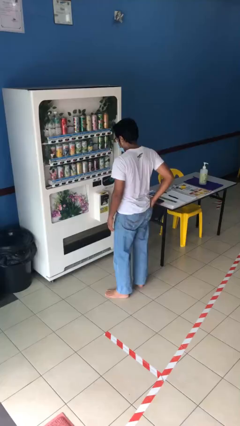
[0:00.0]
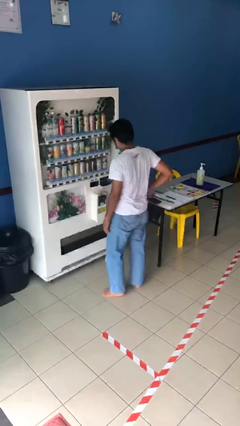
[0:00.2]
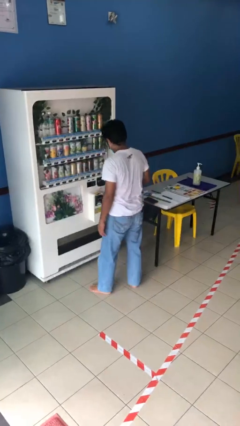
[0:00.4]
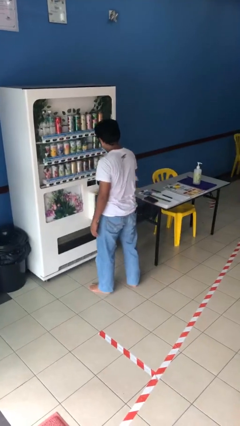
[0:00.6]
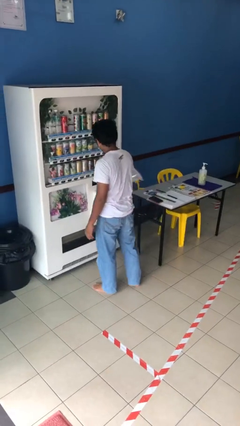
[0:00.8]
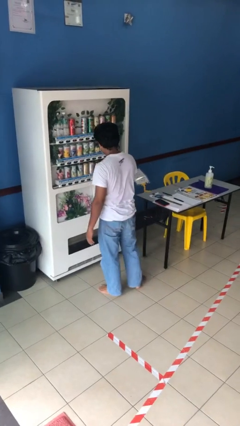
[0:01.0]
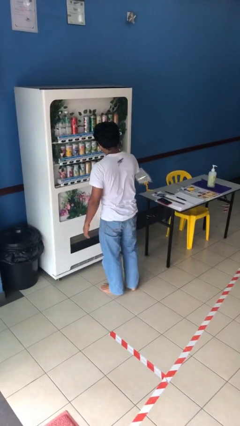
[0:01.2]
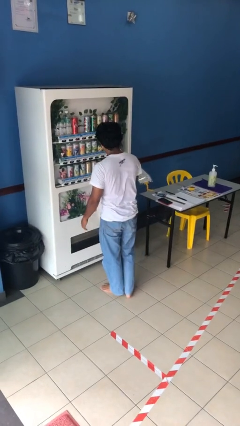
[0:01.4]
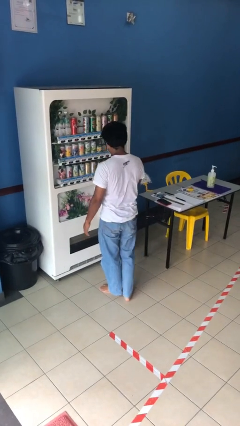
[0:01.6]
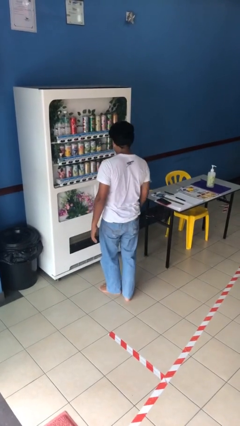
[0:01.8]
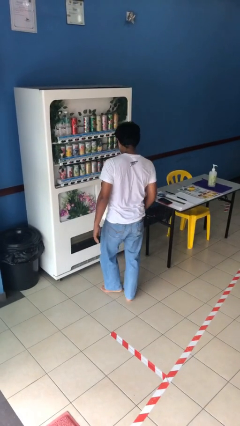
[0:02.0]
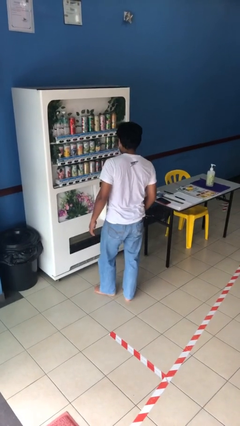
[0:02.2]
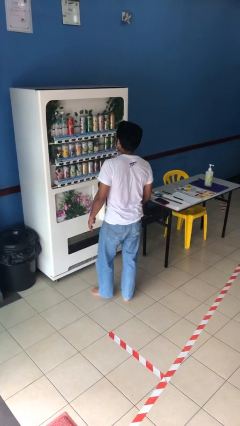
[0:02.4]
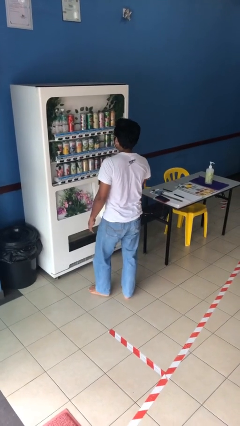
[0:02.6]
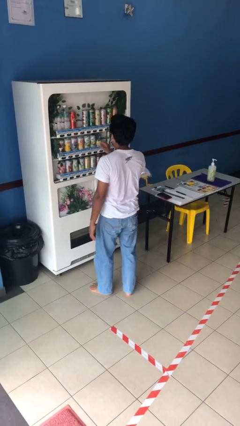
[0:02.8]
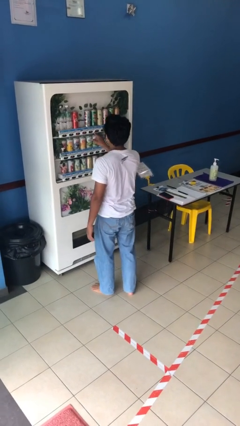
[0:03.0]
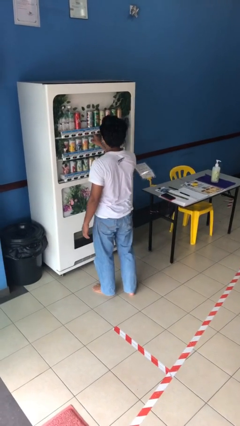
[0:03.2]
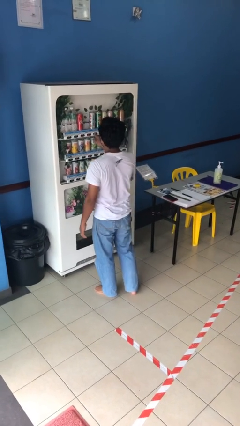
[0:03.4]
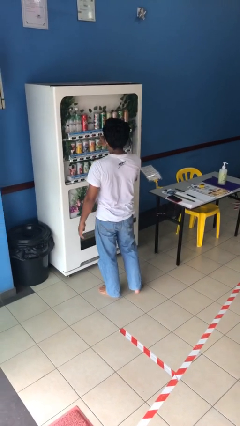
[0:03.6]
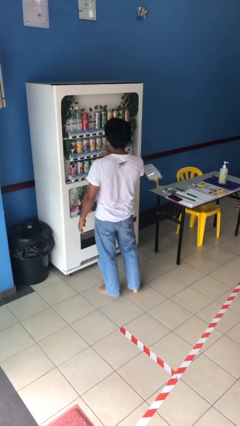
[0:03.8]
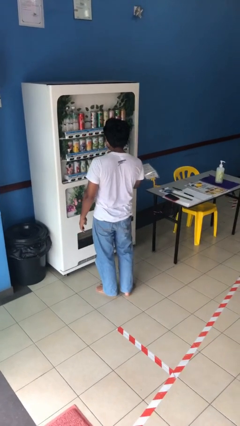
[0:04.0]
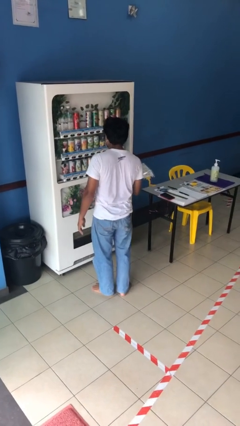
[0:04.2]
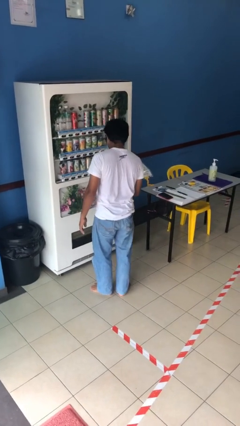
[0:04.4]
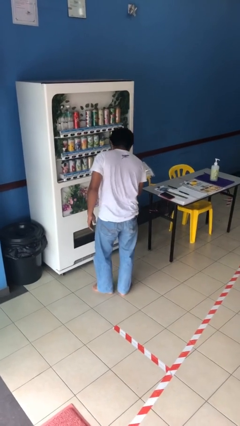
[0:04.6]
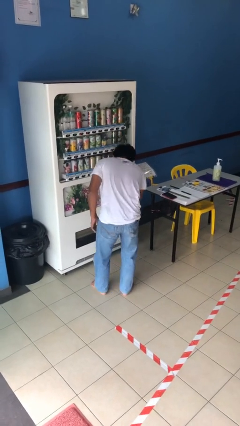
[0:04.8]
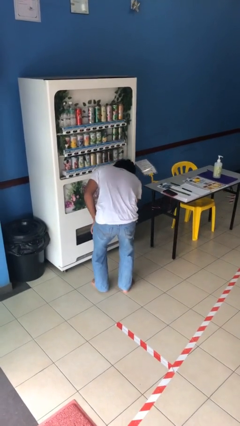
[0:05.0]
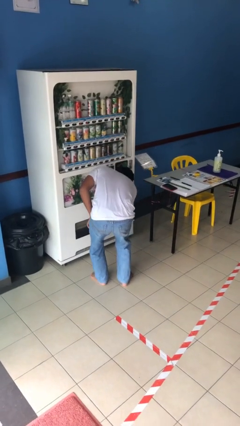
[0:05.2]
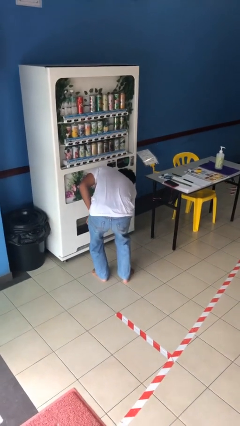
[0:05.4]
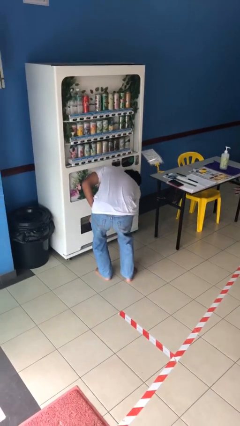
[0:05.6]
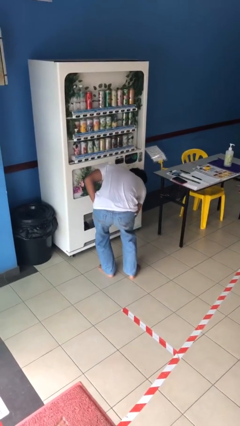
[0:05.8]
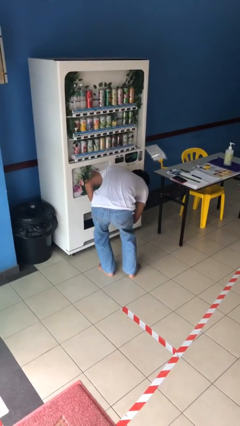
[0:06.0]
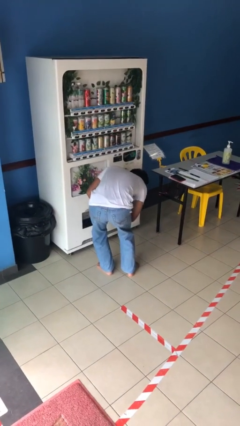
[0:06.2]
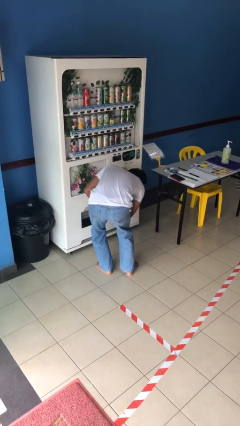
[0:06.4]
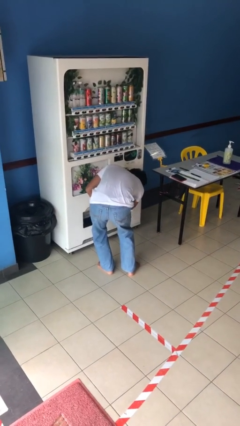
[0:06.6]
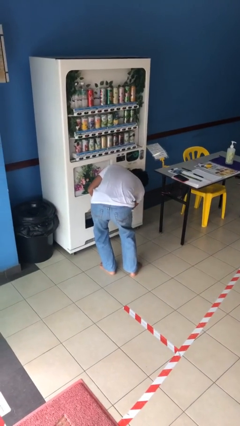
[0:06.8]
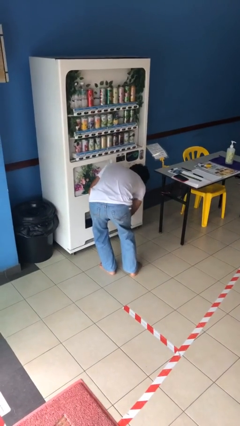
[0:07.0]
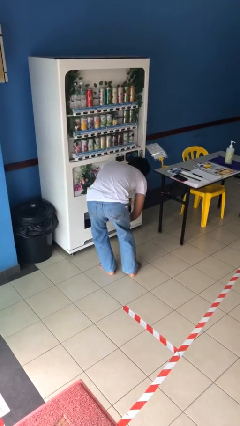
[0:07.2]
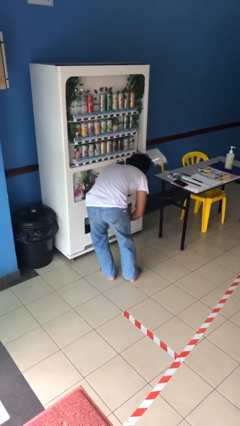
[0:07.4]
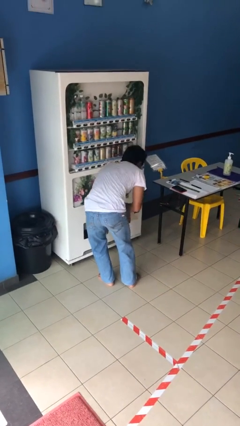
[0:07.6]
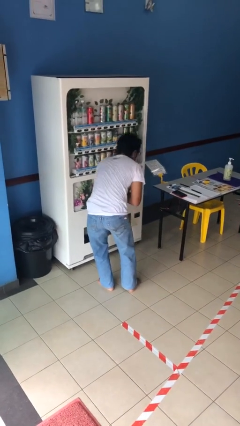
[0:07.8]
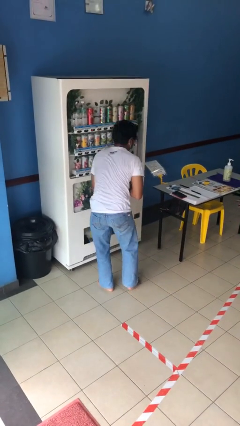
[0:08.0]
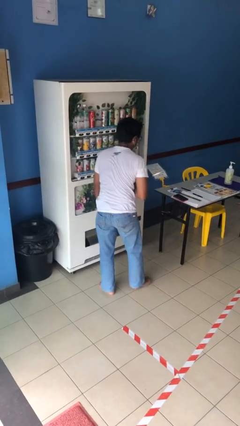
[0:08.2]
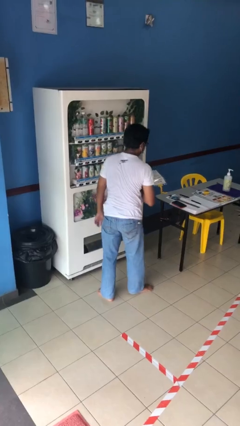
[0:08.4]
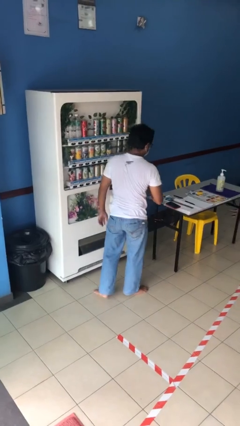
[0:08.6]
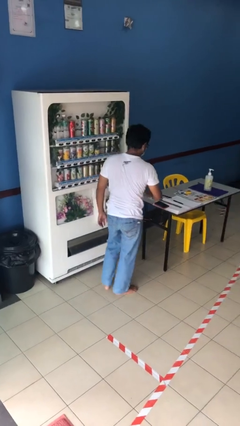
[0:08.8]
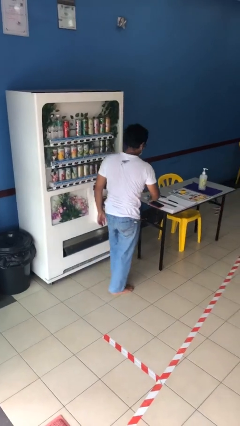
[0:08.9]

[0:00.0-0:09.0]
person purchases from machine

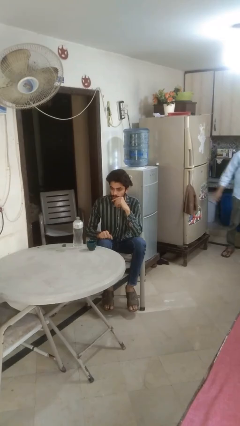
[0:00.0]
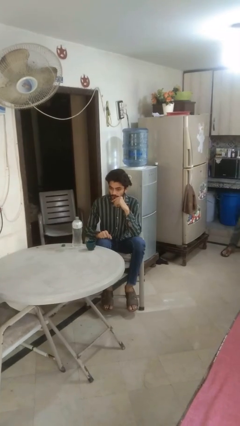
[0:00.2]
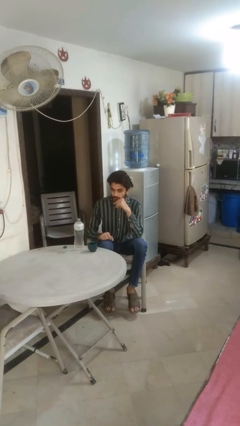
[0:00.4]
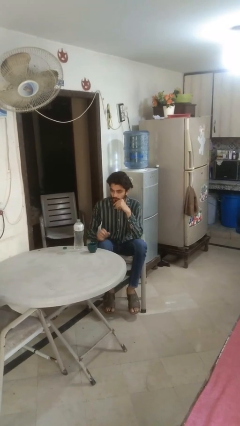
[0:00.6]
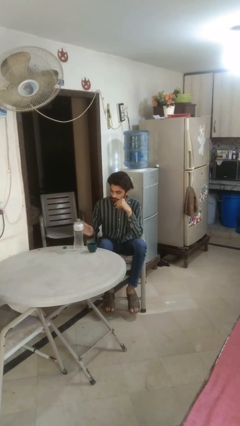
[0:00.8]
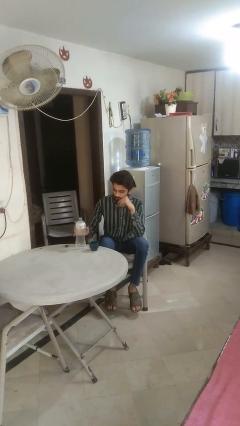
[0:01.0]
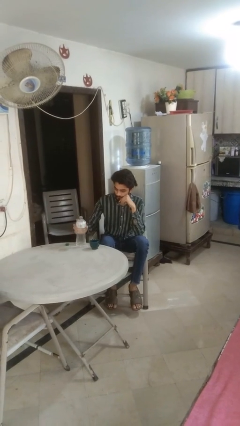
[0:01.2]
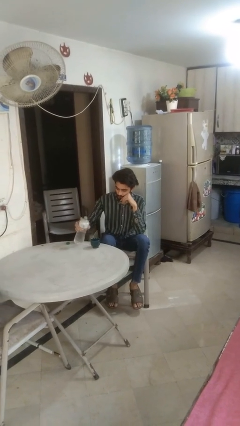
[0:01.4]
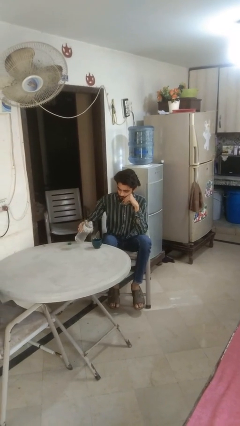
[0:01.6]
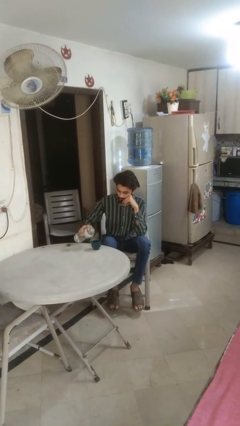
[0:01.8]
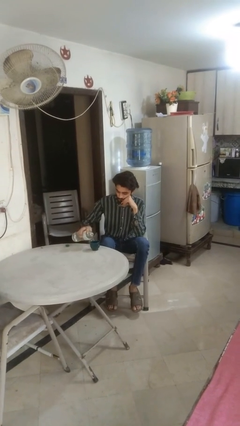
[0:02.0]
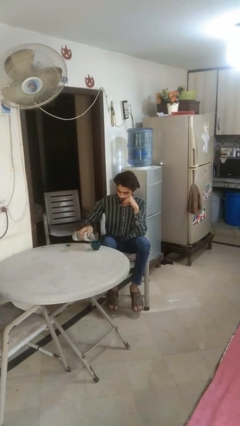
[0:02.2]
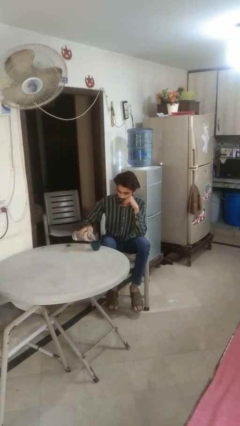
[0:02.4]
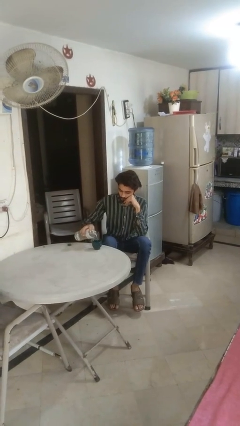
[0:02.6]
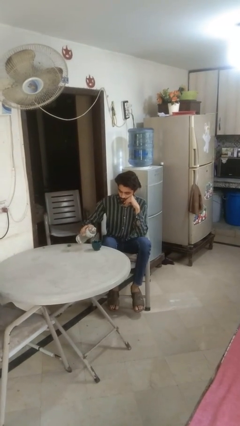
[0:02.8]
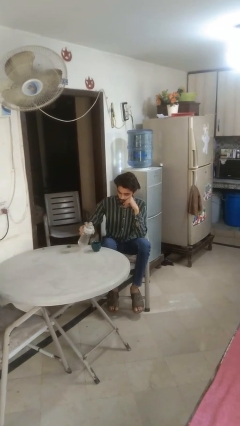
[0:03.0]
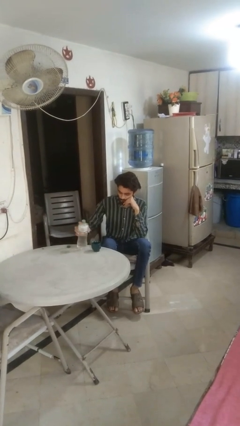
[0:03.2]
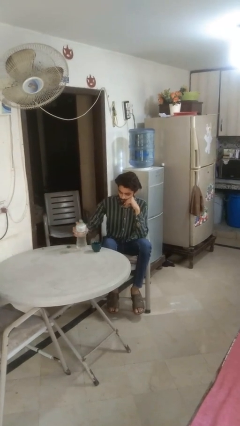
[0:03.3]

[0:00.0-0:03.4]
person pours liquid into cup

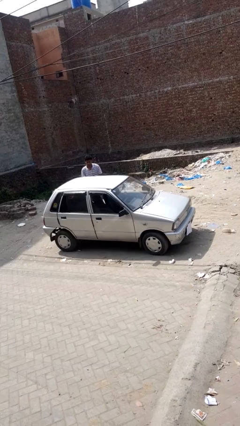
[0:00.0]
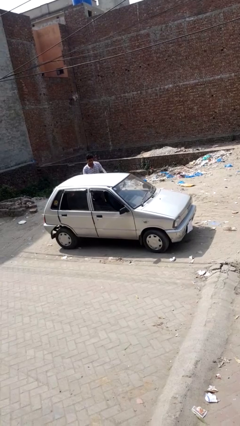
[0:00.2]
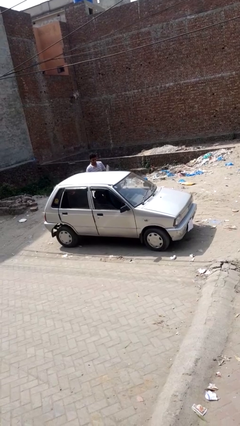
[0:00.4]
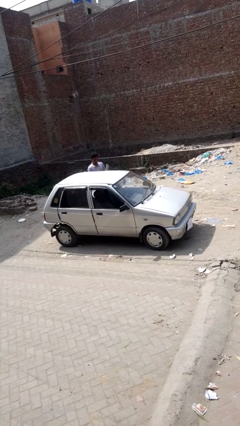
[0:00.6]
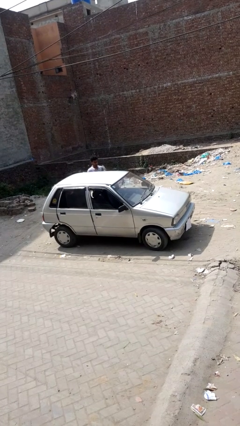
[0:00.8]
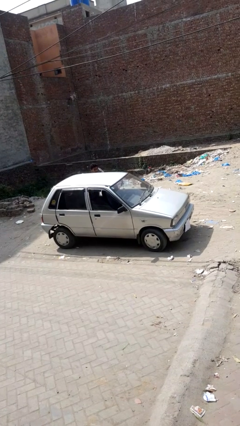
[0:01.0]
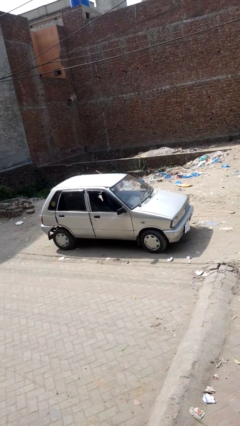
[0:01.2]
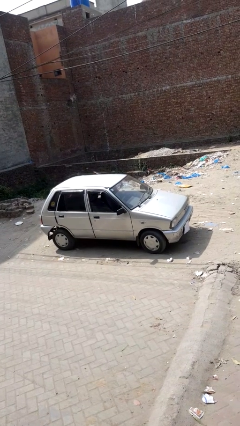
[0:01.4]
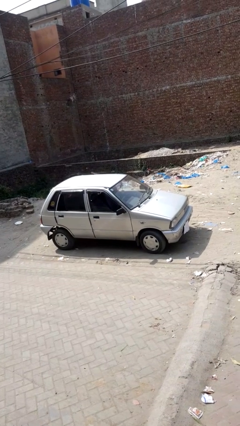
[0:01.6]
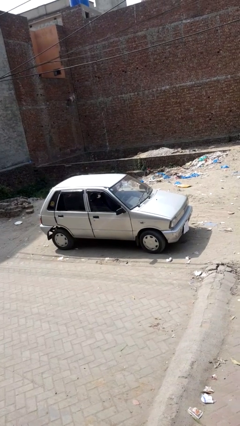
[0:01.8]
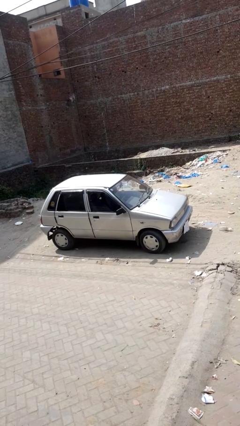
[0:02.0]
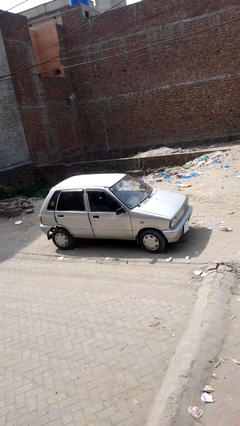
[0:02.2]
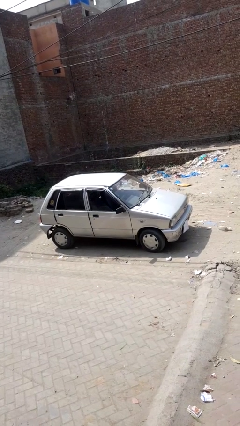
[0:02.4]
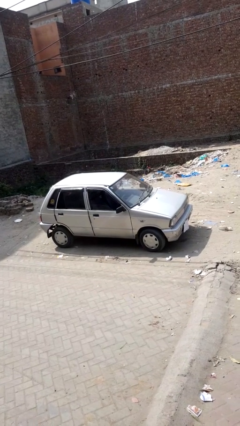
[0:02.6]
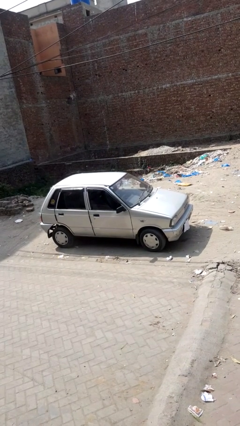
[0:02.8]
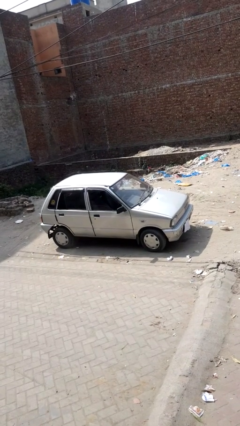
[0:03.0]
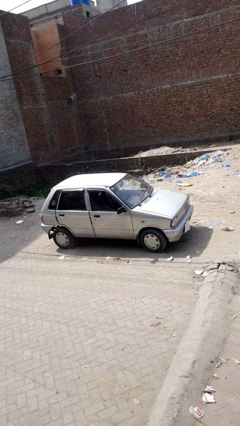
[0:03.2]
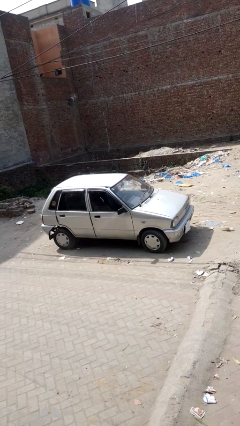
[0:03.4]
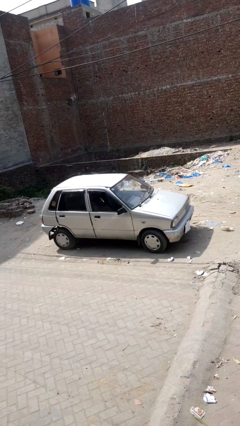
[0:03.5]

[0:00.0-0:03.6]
car picks up person

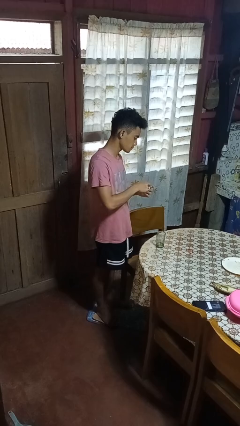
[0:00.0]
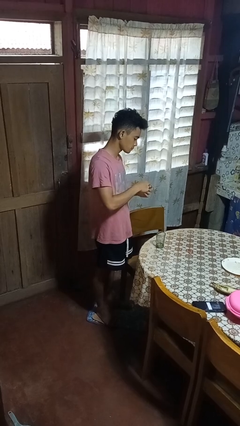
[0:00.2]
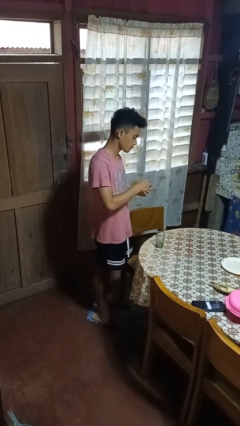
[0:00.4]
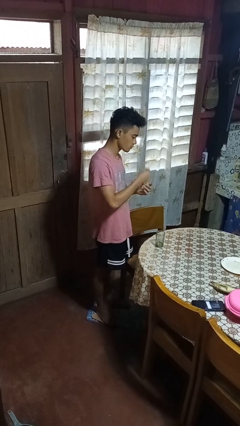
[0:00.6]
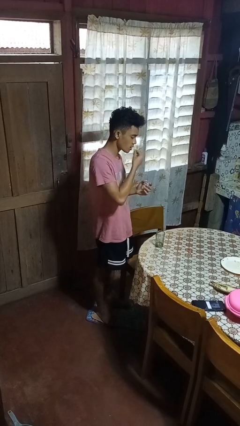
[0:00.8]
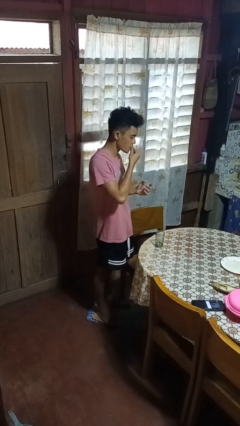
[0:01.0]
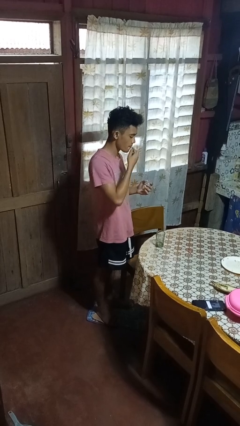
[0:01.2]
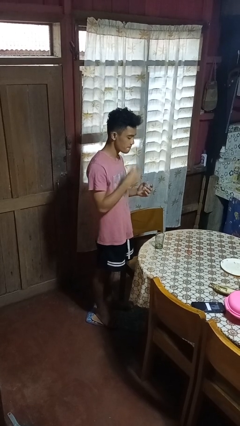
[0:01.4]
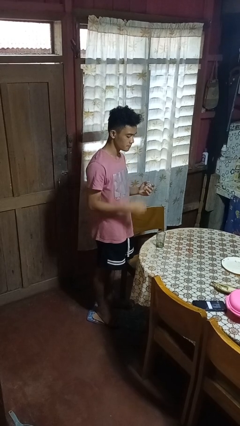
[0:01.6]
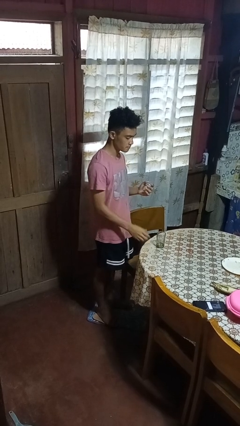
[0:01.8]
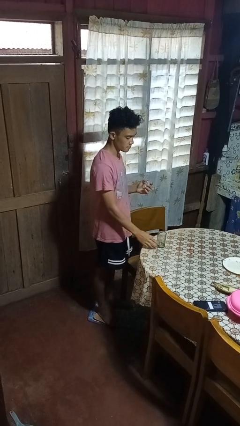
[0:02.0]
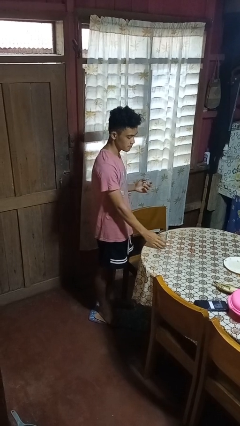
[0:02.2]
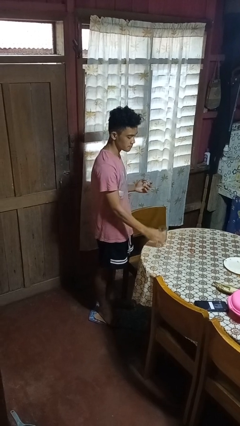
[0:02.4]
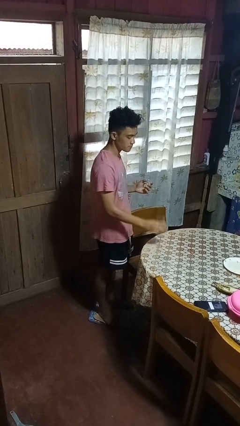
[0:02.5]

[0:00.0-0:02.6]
person takes medicine pills
